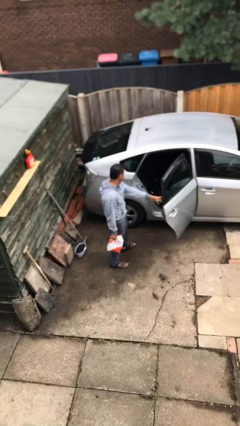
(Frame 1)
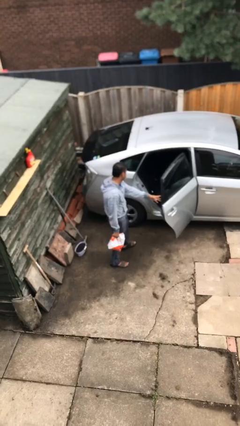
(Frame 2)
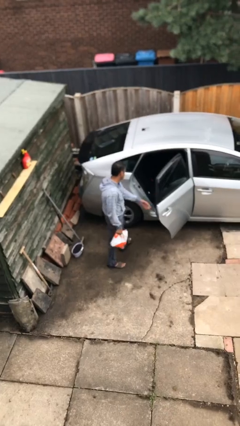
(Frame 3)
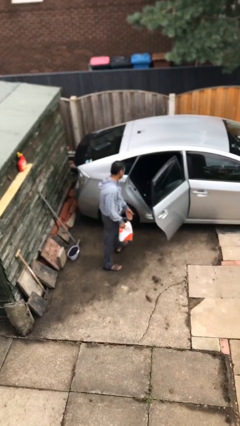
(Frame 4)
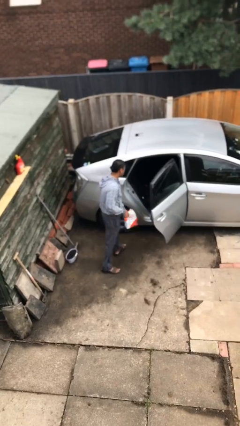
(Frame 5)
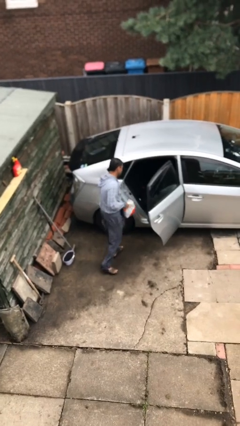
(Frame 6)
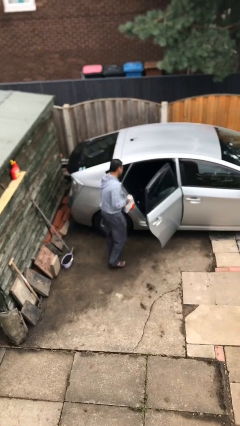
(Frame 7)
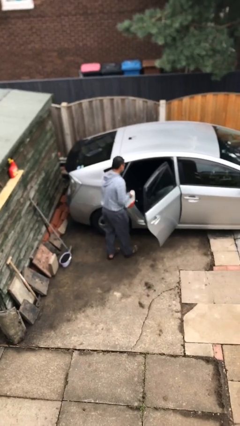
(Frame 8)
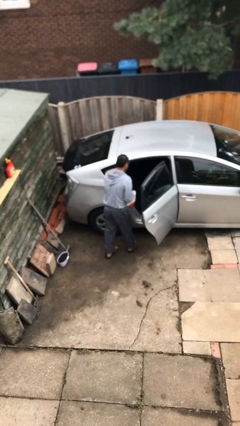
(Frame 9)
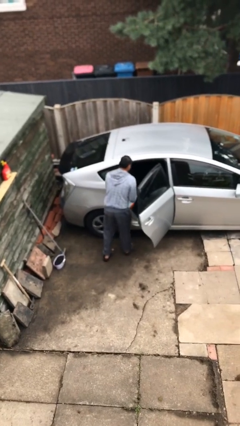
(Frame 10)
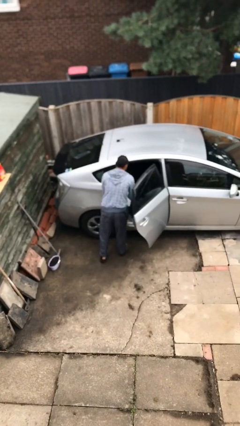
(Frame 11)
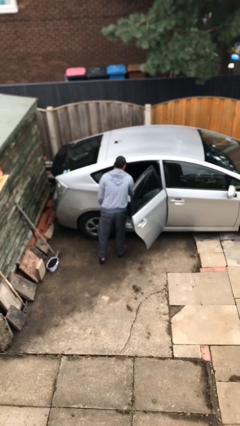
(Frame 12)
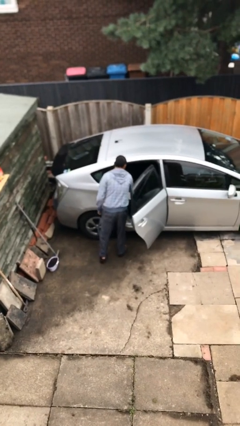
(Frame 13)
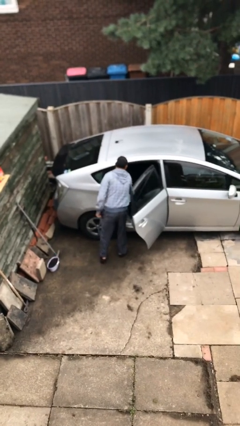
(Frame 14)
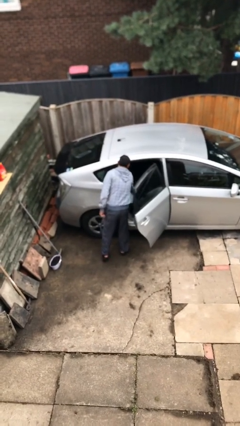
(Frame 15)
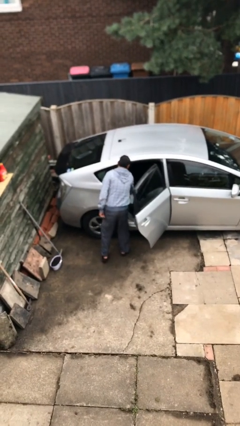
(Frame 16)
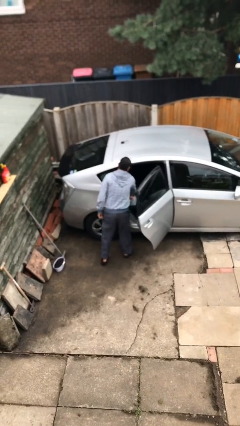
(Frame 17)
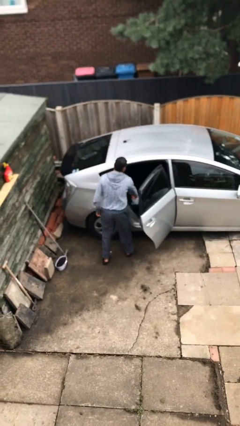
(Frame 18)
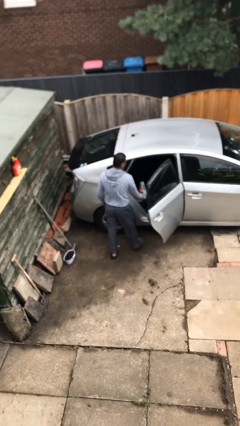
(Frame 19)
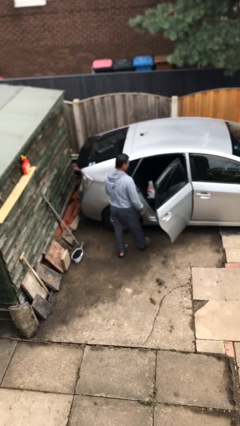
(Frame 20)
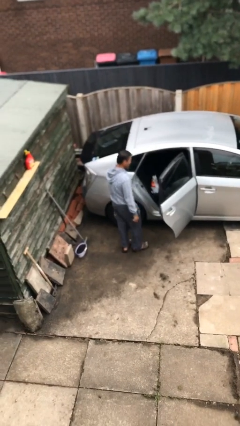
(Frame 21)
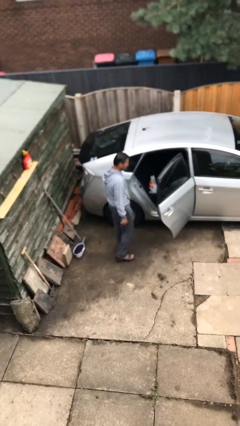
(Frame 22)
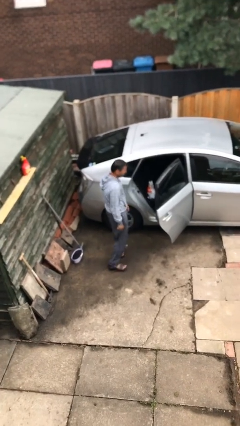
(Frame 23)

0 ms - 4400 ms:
person loads car

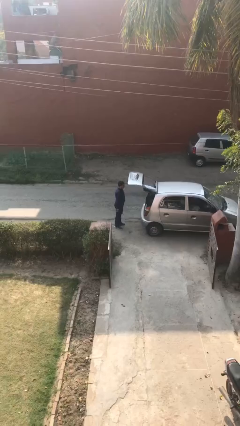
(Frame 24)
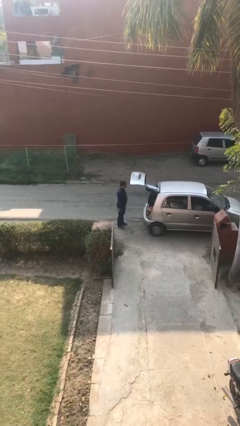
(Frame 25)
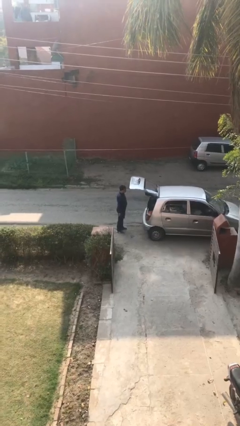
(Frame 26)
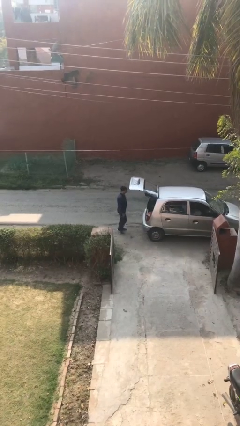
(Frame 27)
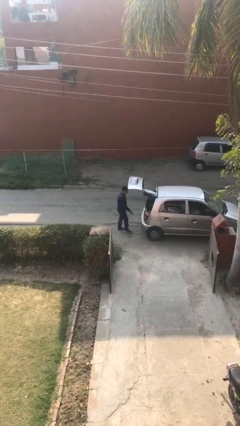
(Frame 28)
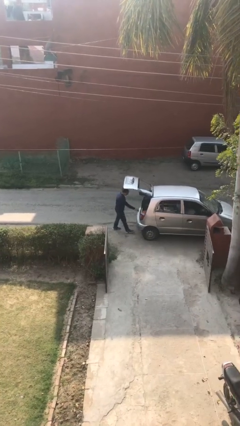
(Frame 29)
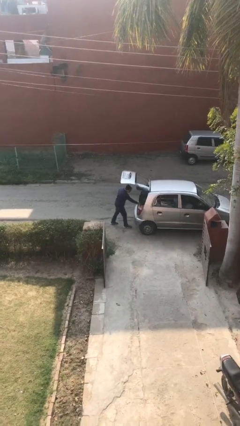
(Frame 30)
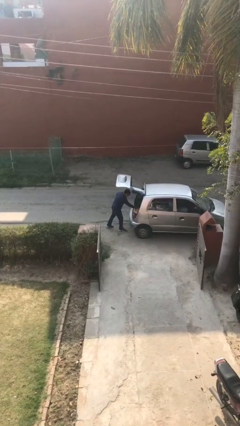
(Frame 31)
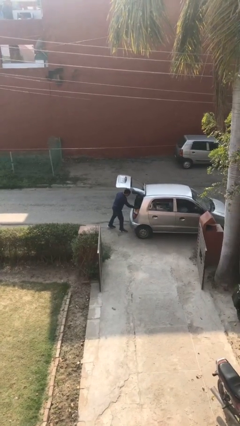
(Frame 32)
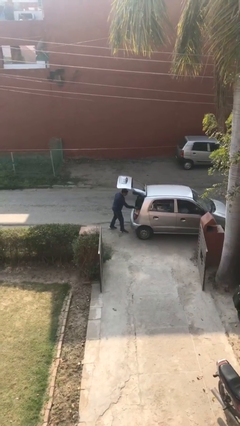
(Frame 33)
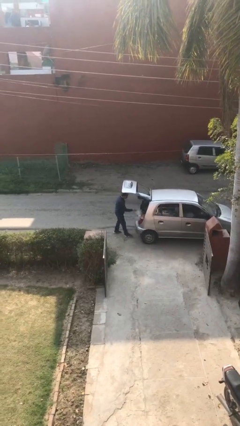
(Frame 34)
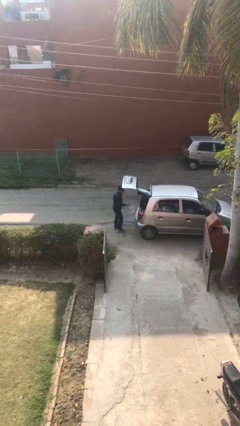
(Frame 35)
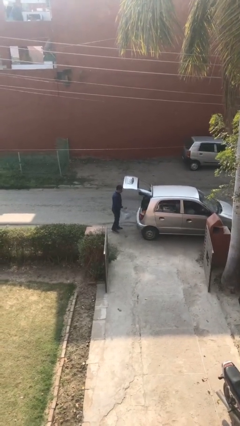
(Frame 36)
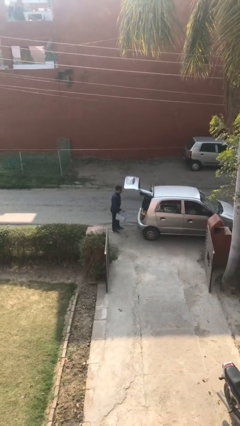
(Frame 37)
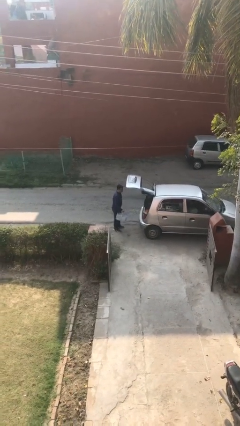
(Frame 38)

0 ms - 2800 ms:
person unloads car

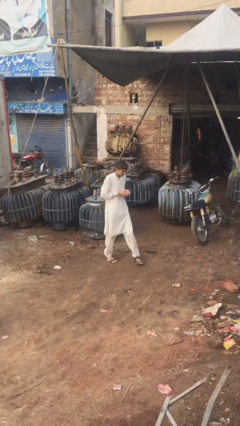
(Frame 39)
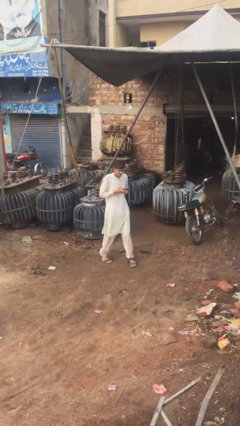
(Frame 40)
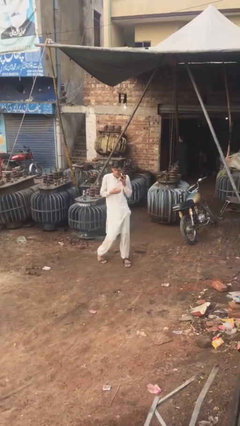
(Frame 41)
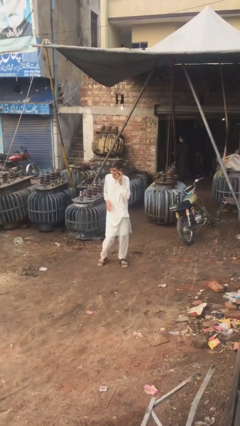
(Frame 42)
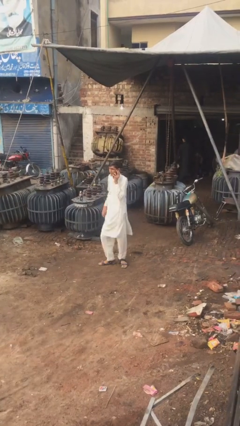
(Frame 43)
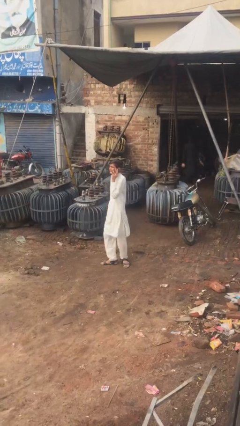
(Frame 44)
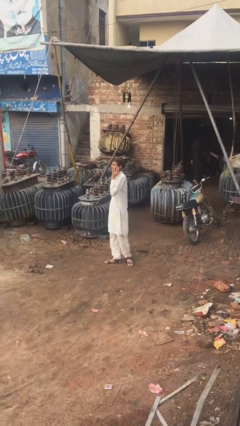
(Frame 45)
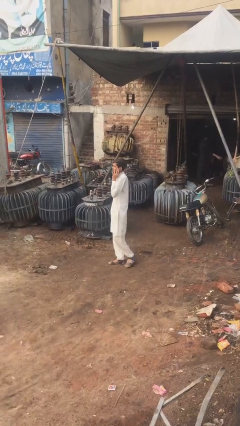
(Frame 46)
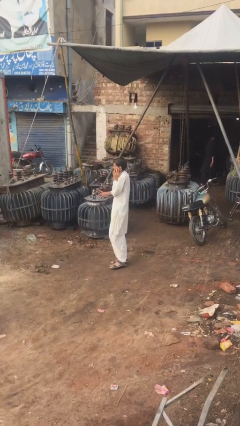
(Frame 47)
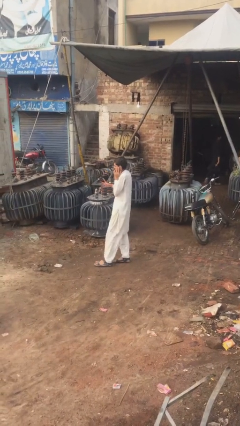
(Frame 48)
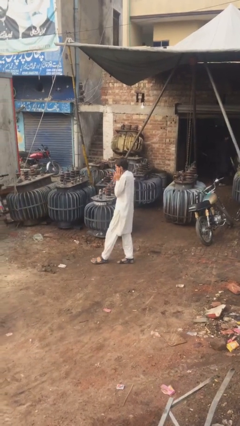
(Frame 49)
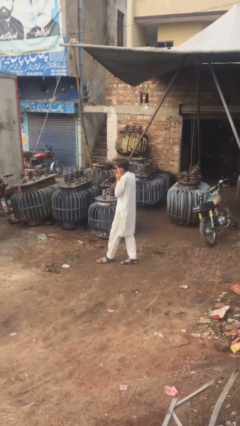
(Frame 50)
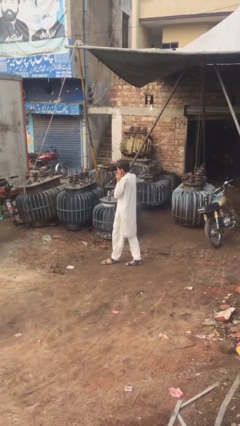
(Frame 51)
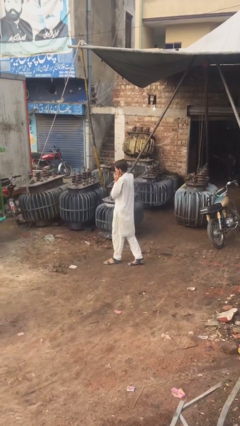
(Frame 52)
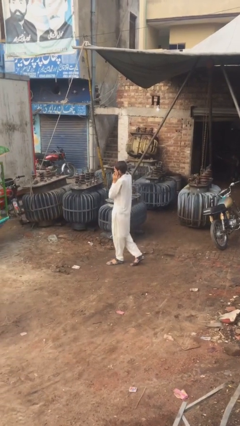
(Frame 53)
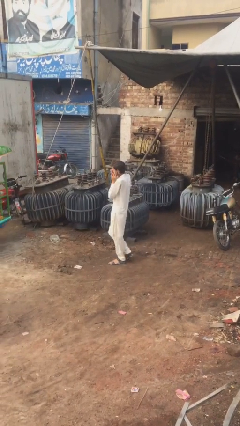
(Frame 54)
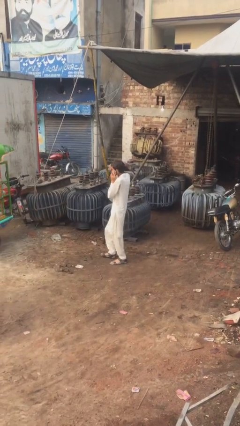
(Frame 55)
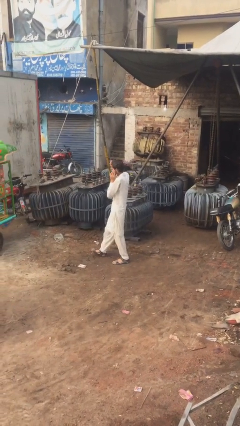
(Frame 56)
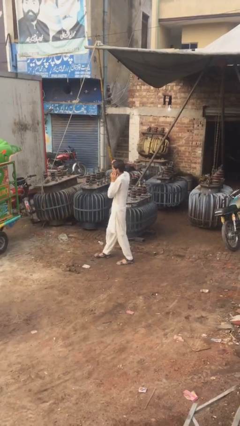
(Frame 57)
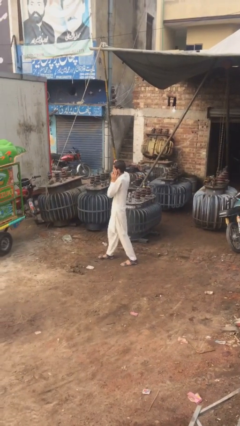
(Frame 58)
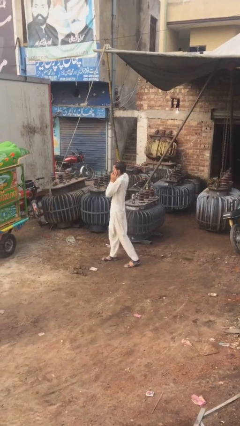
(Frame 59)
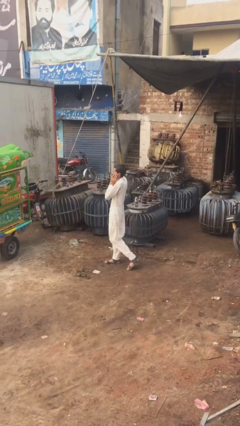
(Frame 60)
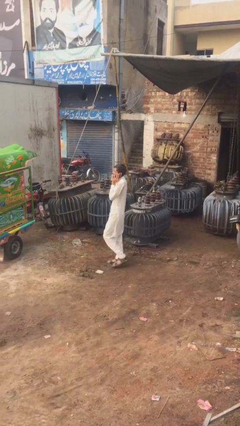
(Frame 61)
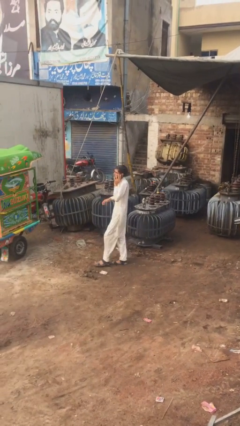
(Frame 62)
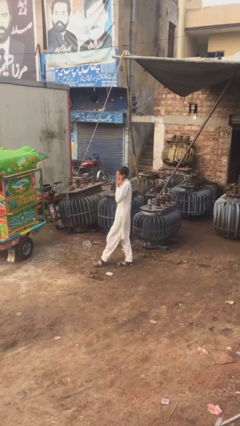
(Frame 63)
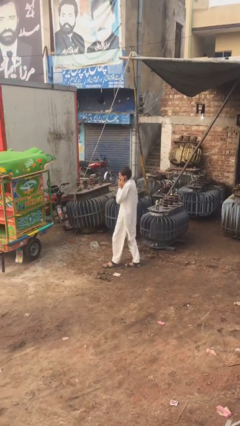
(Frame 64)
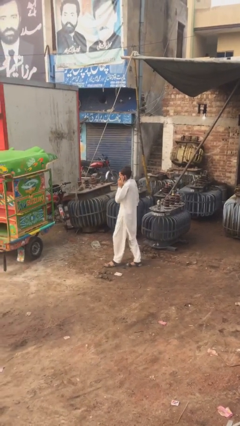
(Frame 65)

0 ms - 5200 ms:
person talks on phone

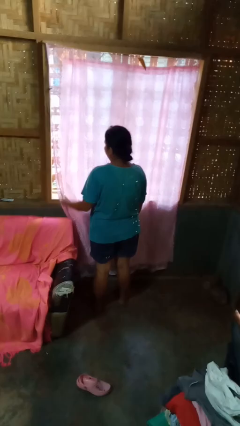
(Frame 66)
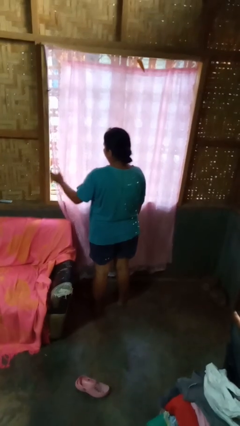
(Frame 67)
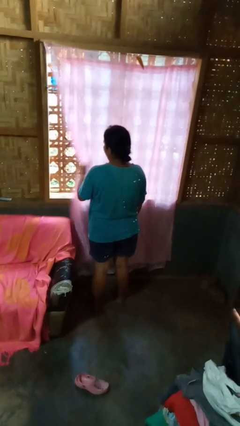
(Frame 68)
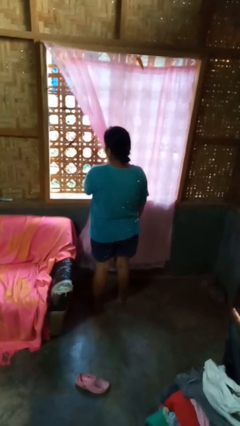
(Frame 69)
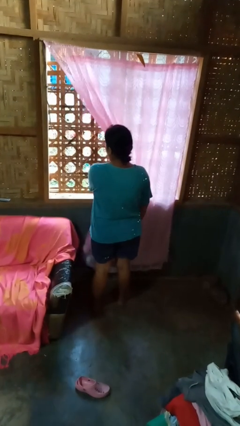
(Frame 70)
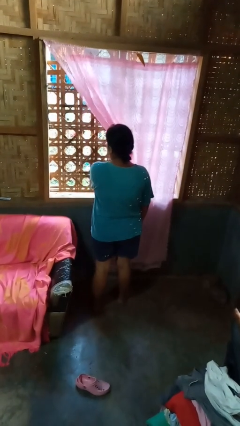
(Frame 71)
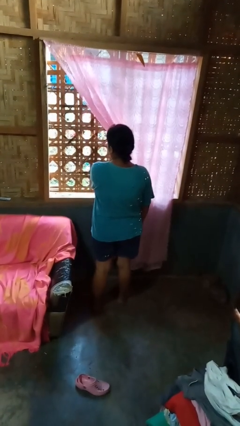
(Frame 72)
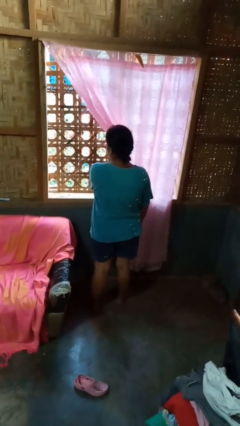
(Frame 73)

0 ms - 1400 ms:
person opens curtains

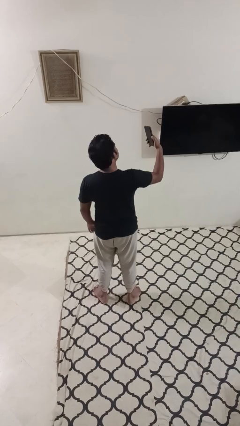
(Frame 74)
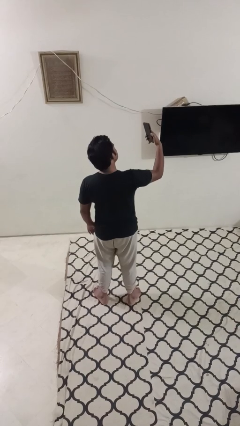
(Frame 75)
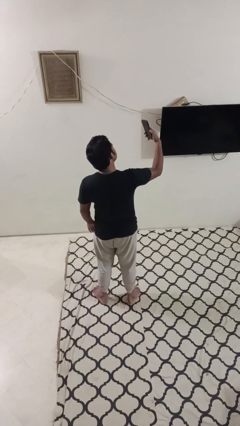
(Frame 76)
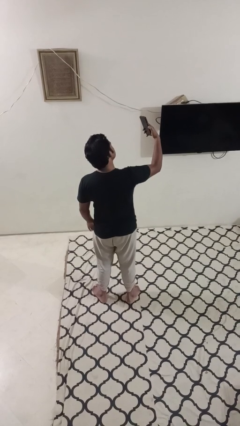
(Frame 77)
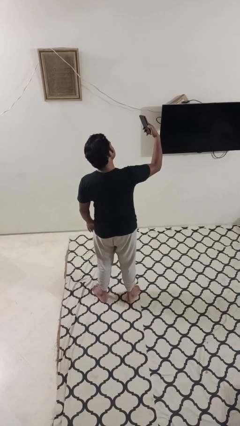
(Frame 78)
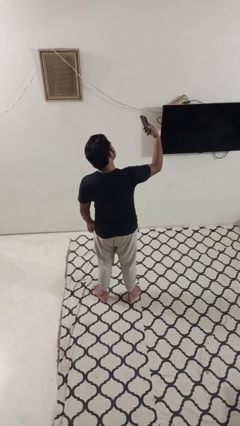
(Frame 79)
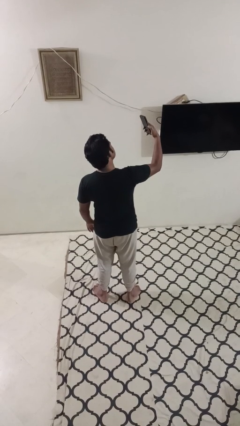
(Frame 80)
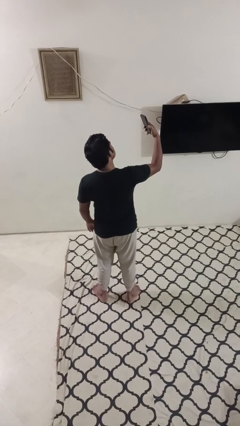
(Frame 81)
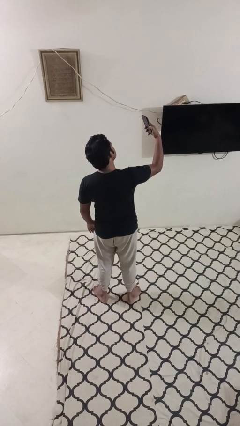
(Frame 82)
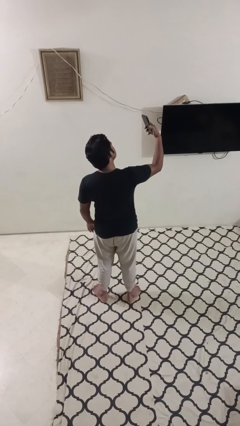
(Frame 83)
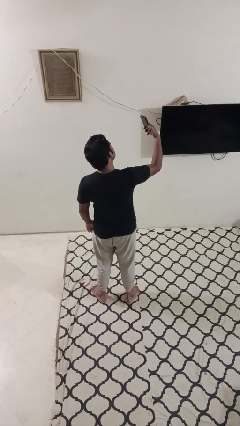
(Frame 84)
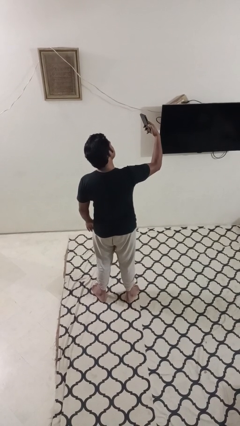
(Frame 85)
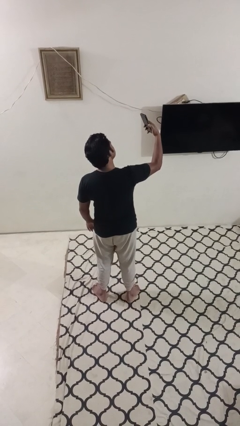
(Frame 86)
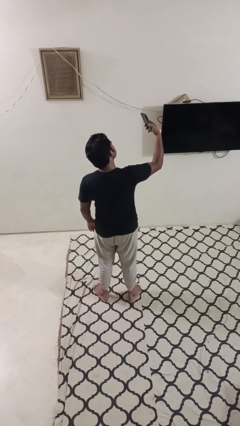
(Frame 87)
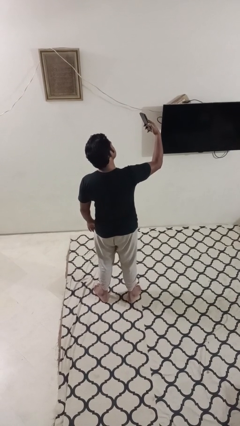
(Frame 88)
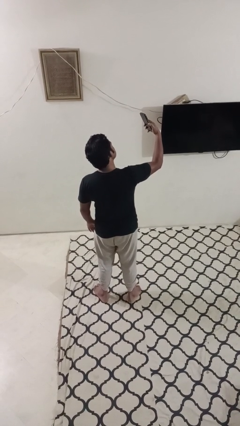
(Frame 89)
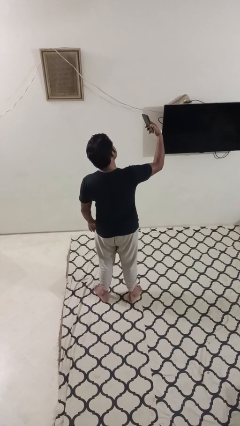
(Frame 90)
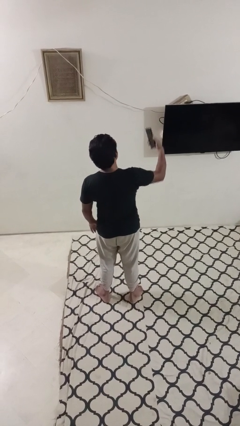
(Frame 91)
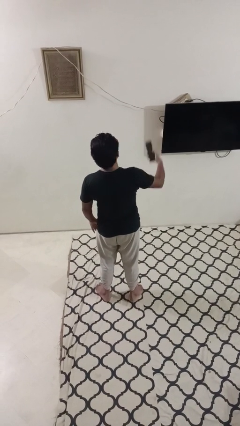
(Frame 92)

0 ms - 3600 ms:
person takes selfie

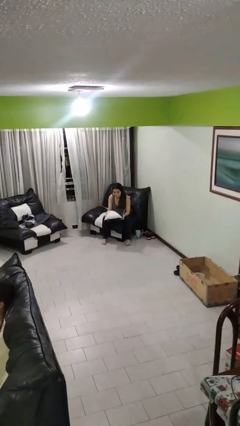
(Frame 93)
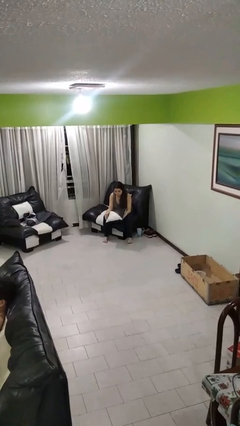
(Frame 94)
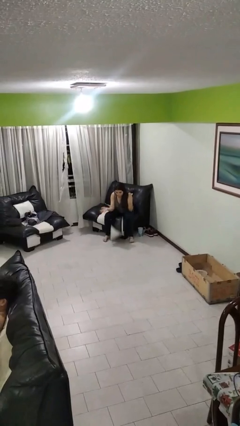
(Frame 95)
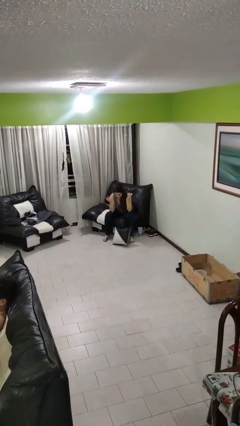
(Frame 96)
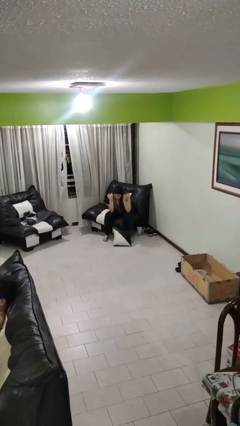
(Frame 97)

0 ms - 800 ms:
person drops object
